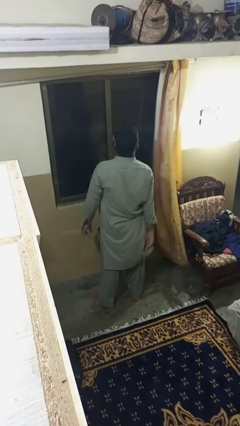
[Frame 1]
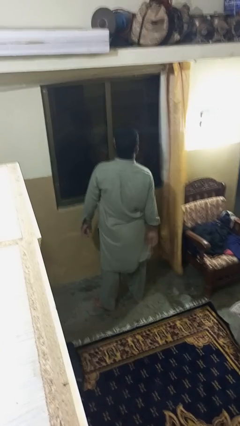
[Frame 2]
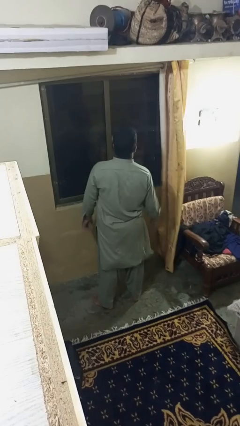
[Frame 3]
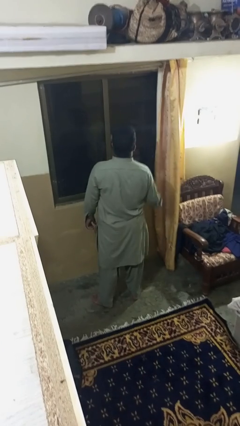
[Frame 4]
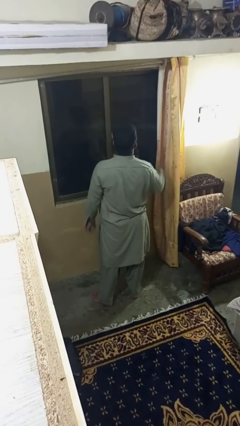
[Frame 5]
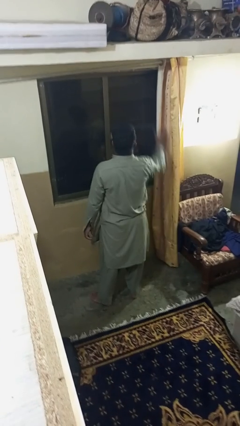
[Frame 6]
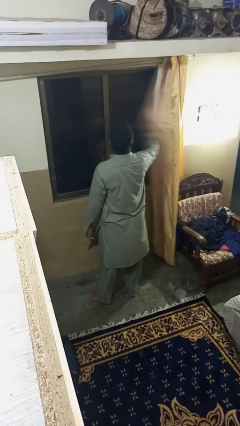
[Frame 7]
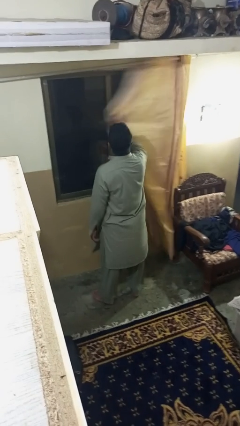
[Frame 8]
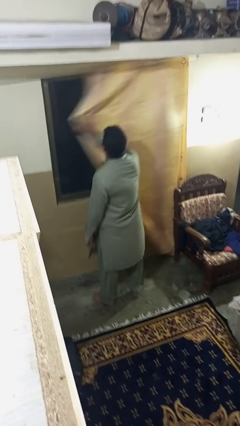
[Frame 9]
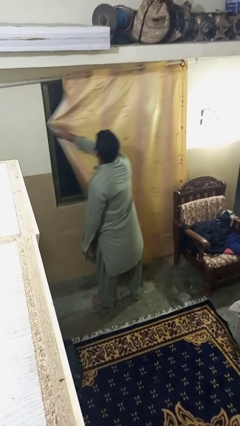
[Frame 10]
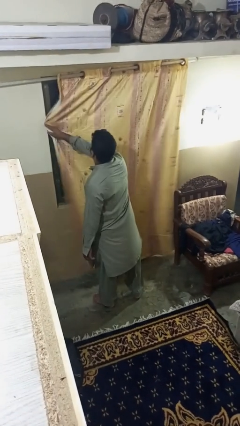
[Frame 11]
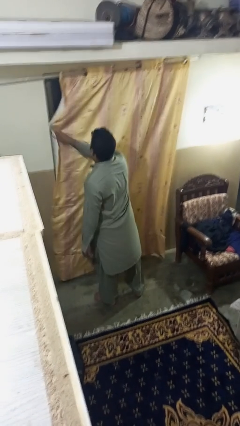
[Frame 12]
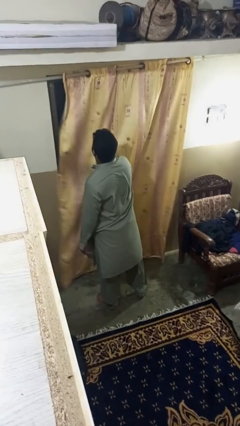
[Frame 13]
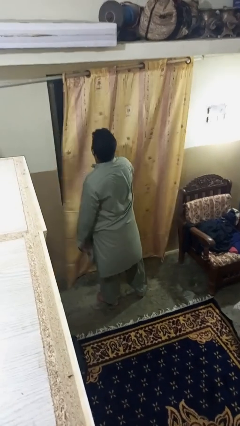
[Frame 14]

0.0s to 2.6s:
person closes curtains

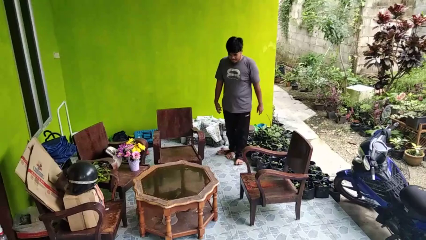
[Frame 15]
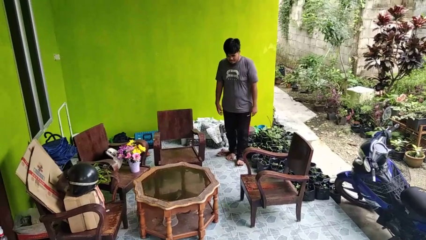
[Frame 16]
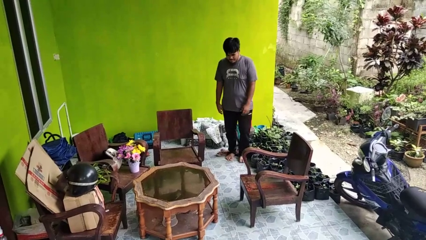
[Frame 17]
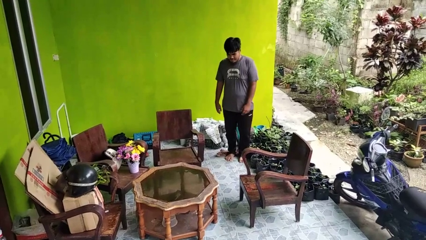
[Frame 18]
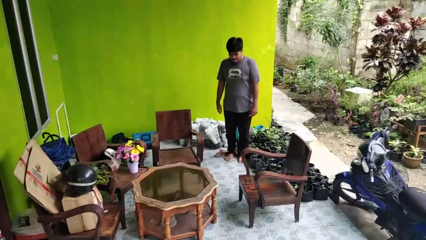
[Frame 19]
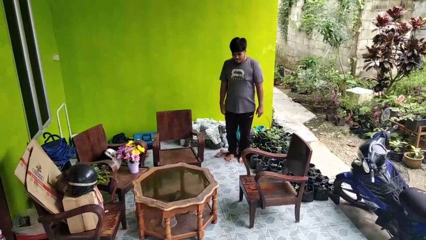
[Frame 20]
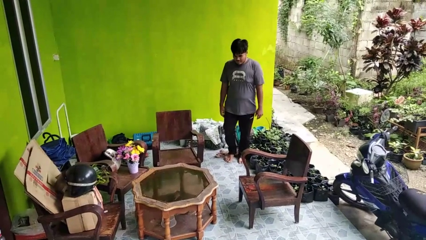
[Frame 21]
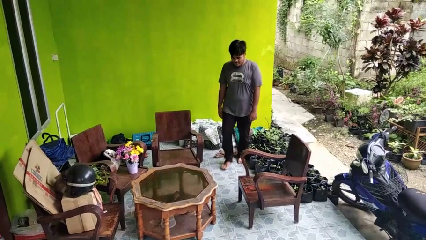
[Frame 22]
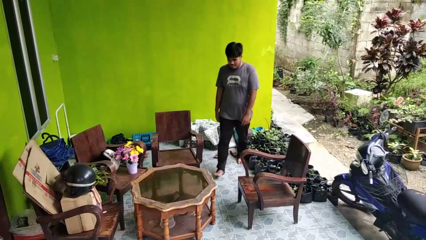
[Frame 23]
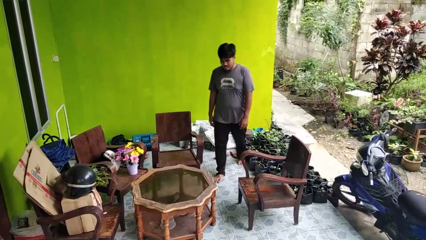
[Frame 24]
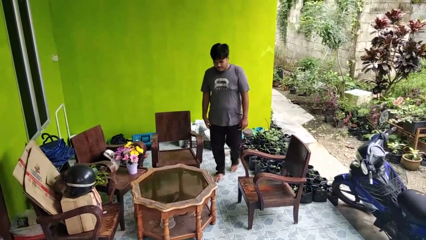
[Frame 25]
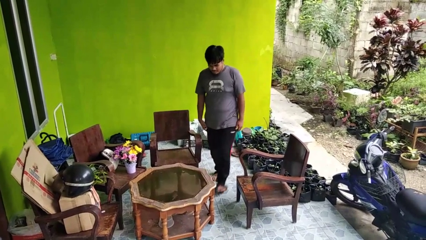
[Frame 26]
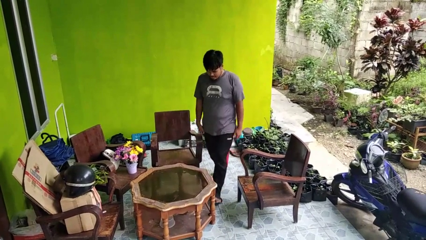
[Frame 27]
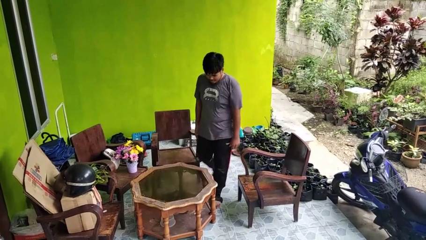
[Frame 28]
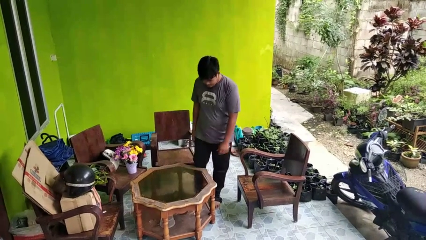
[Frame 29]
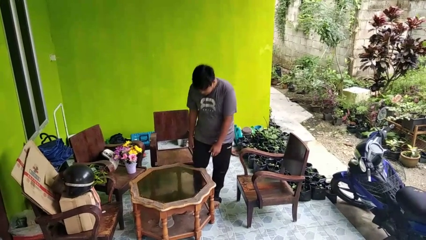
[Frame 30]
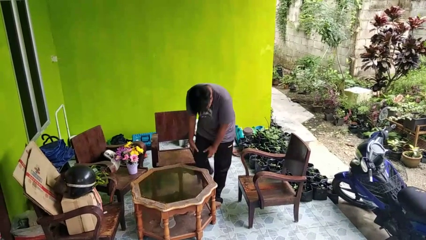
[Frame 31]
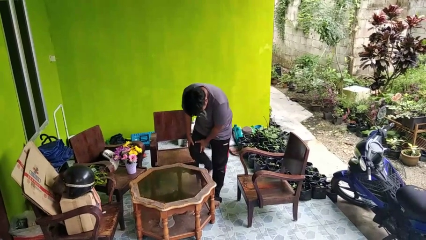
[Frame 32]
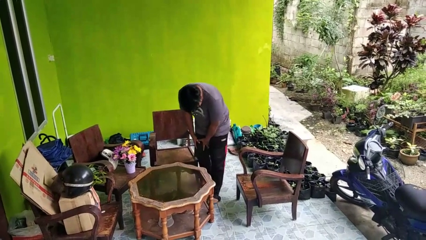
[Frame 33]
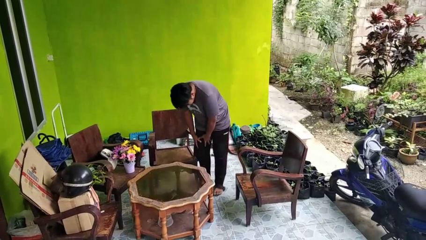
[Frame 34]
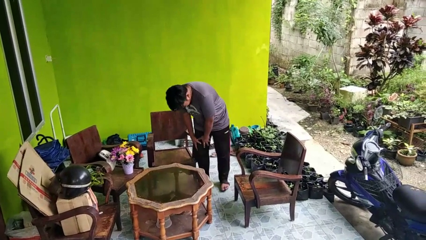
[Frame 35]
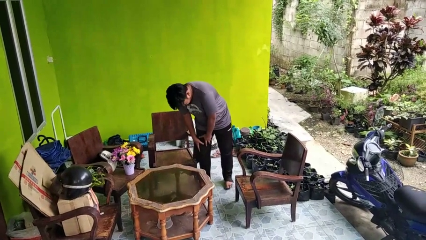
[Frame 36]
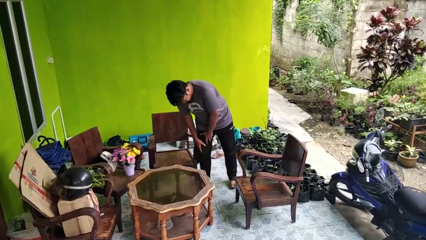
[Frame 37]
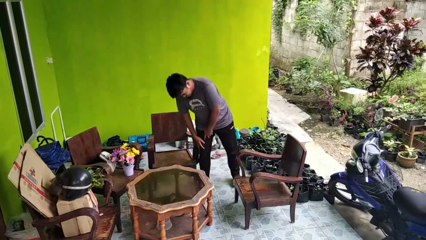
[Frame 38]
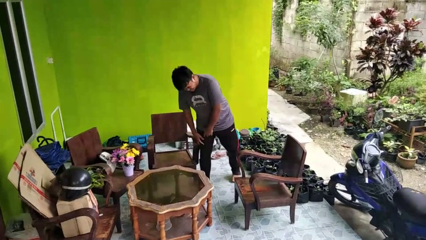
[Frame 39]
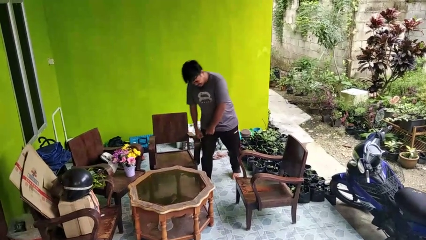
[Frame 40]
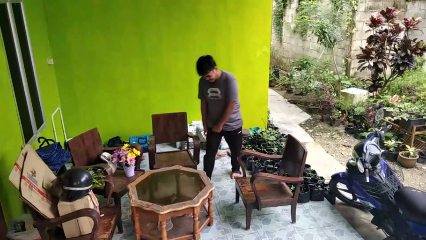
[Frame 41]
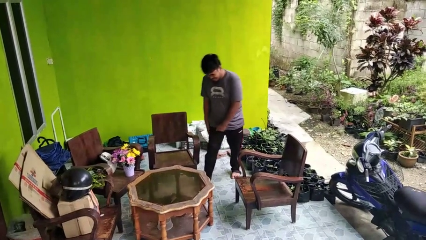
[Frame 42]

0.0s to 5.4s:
person bumps into table

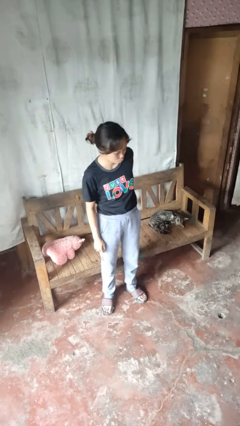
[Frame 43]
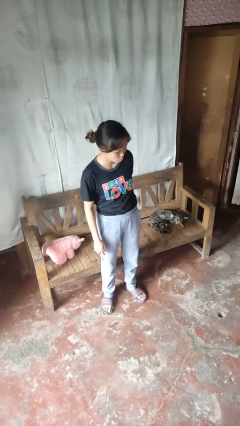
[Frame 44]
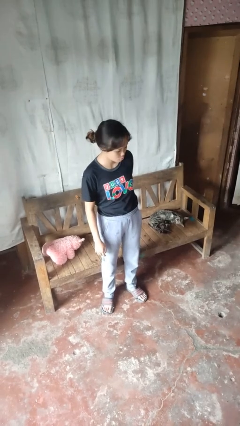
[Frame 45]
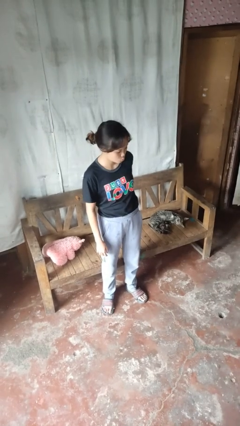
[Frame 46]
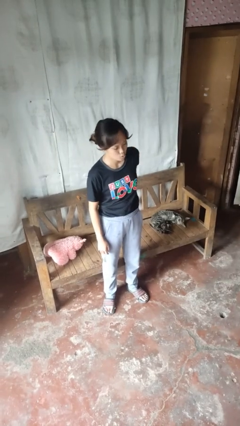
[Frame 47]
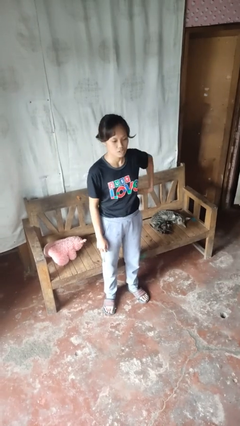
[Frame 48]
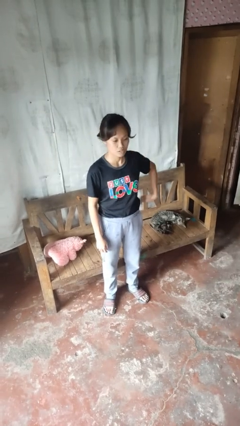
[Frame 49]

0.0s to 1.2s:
person puts hands in back pockets

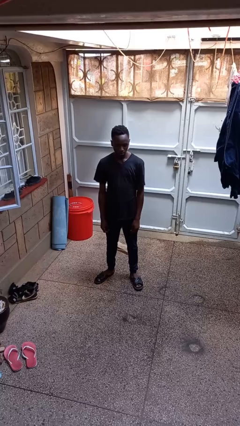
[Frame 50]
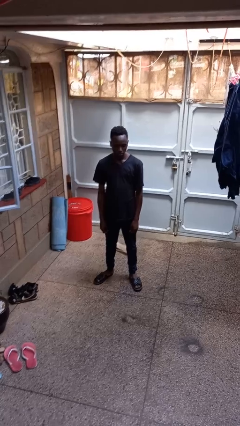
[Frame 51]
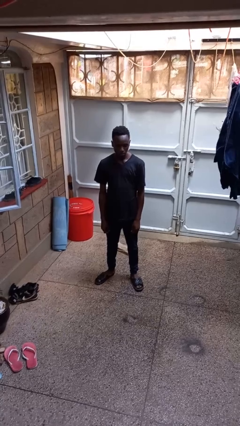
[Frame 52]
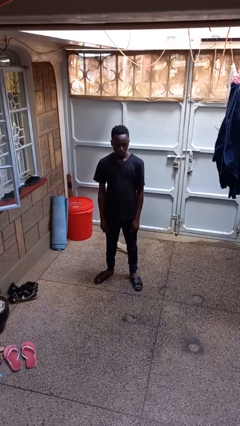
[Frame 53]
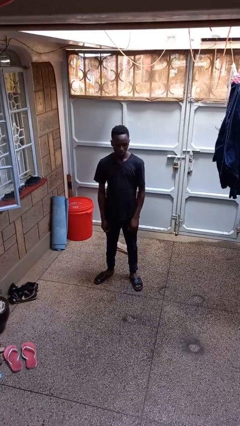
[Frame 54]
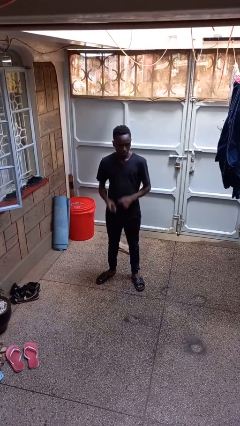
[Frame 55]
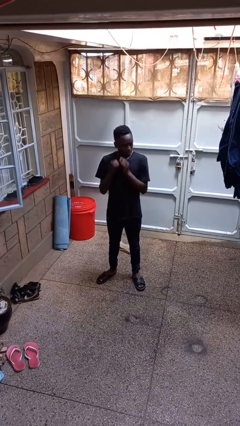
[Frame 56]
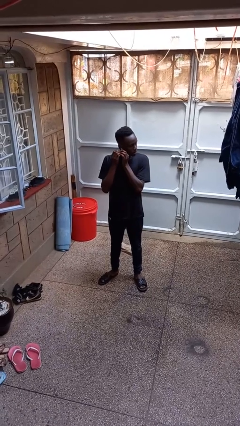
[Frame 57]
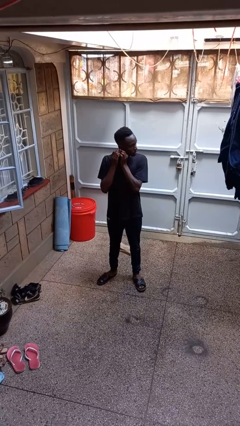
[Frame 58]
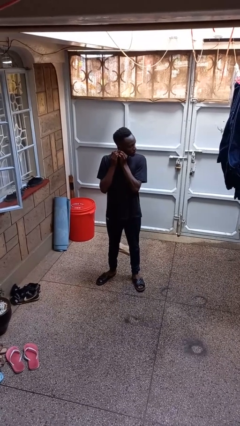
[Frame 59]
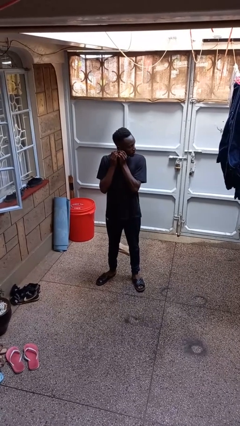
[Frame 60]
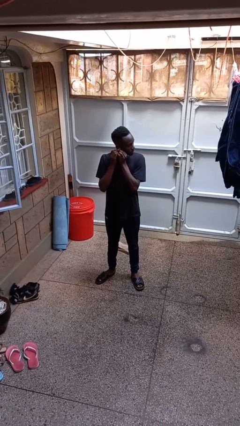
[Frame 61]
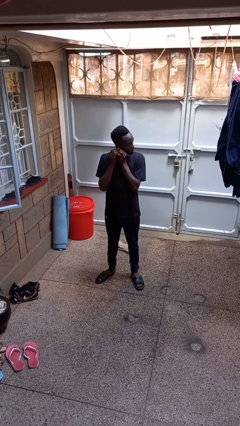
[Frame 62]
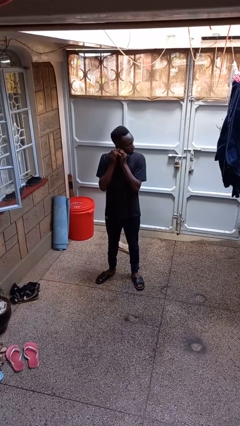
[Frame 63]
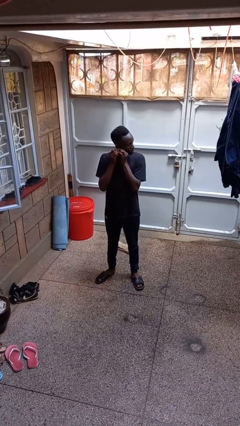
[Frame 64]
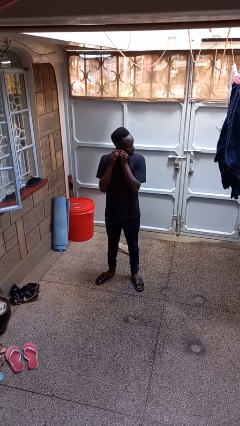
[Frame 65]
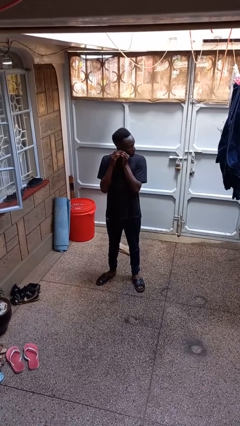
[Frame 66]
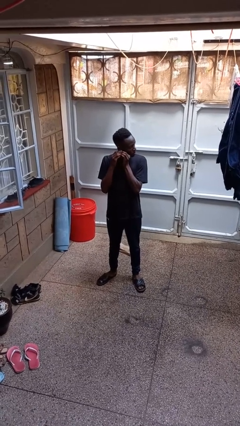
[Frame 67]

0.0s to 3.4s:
person puts on earrings

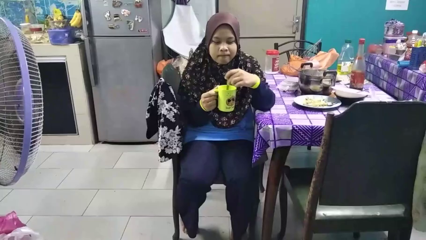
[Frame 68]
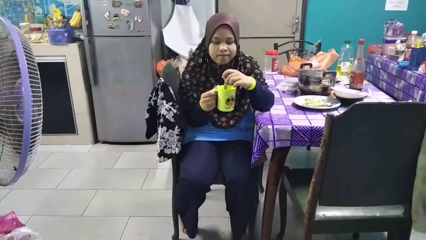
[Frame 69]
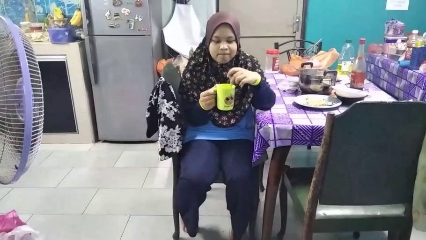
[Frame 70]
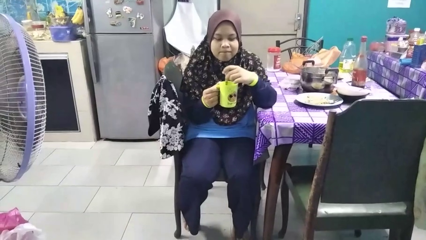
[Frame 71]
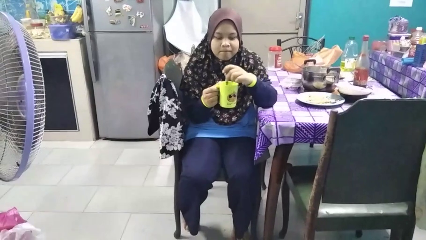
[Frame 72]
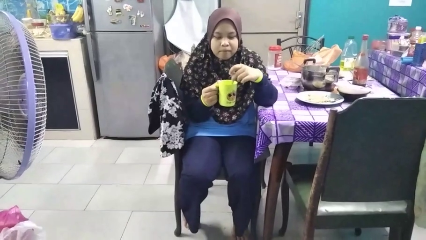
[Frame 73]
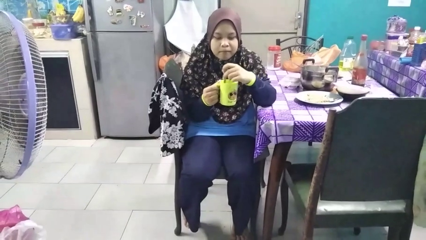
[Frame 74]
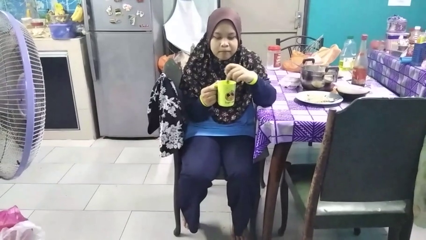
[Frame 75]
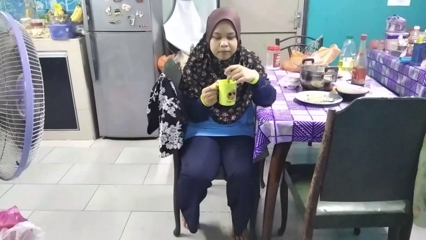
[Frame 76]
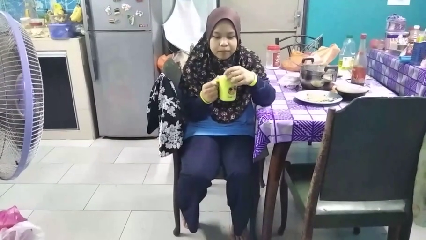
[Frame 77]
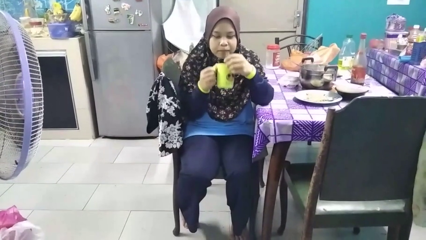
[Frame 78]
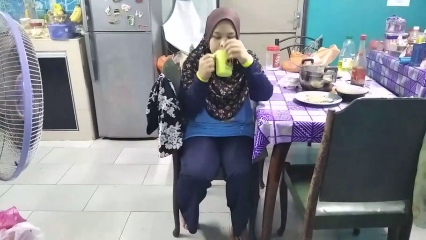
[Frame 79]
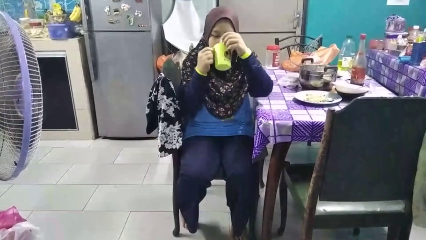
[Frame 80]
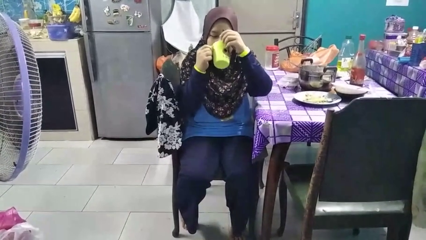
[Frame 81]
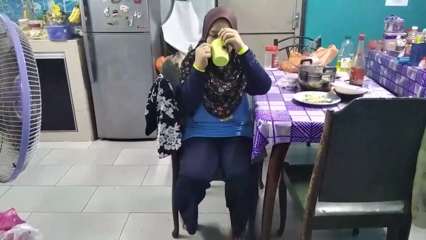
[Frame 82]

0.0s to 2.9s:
person stirs mug

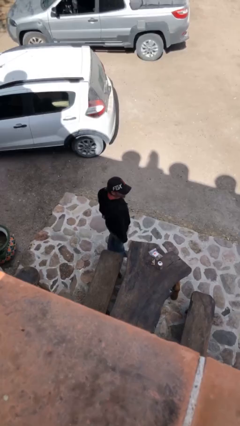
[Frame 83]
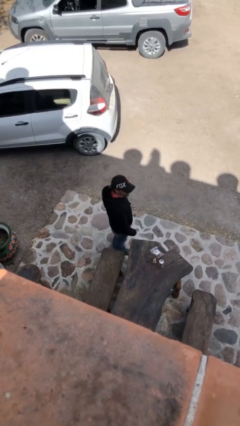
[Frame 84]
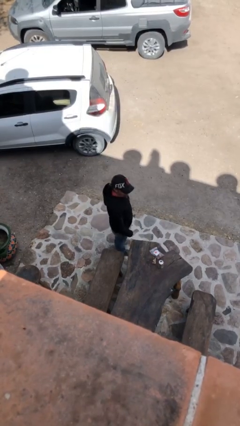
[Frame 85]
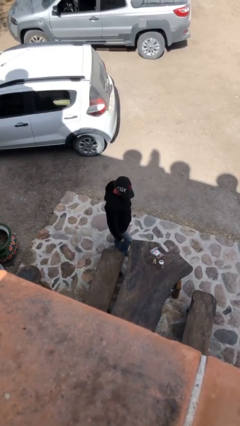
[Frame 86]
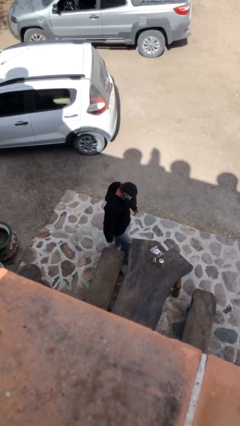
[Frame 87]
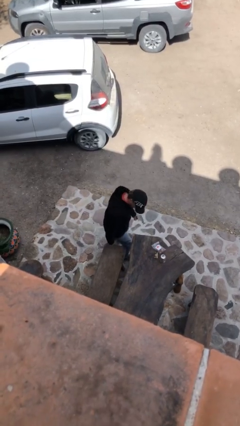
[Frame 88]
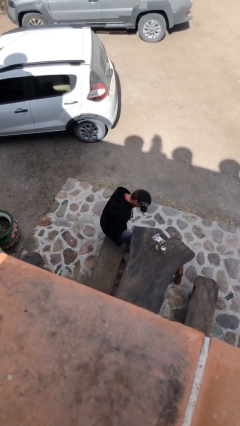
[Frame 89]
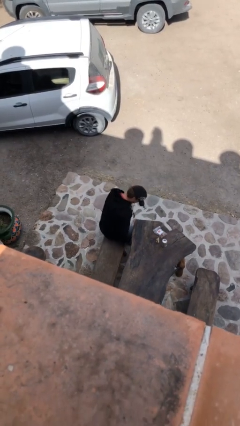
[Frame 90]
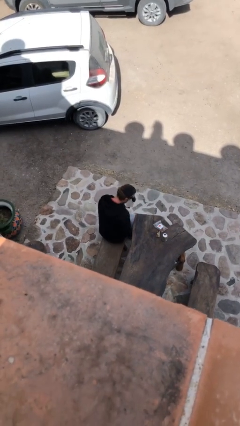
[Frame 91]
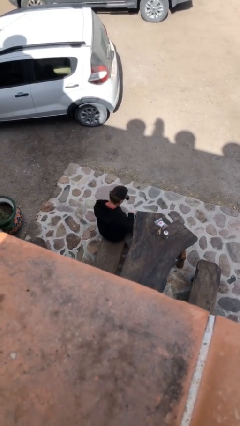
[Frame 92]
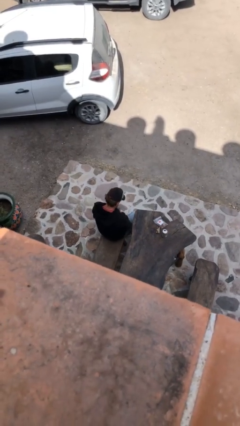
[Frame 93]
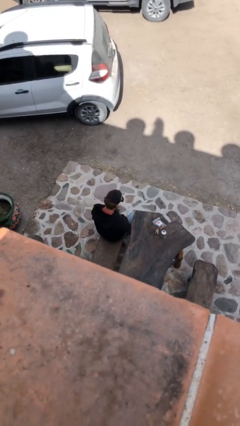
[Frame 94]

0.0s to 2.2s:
person sits down
